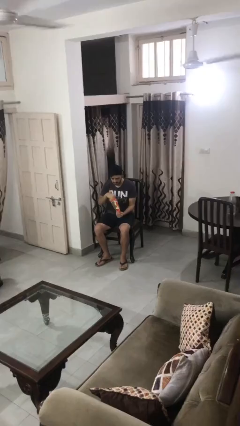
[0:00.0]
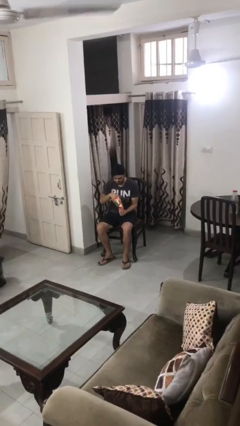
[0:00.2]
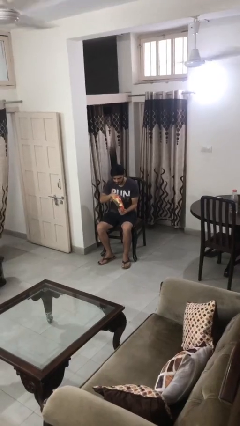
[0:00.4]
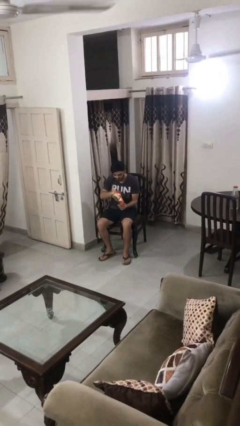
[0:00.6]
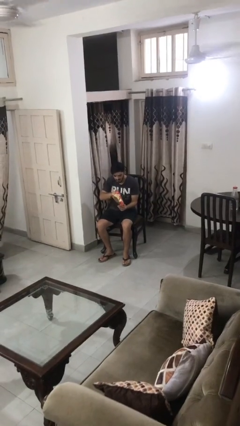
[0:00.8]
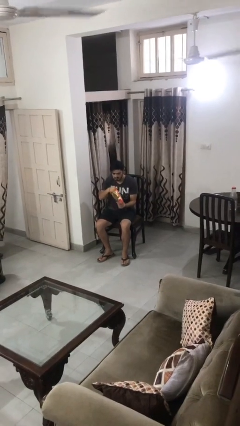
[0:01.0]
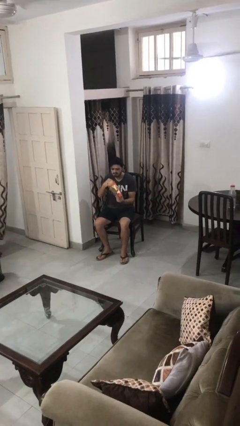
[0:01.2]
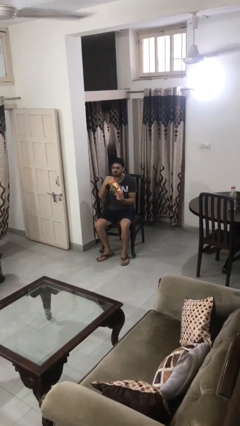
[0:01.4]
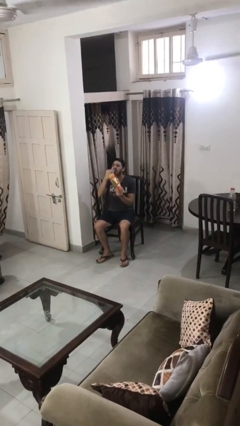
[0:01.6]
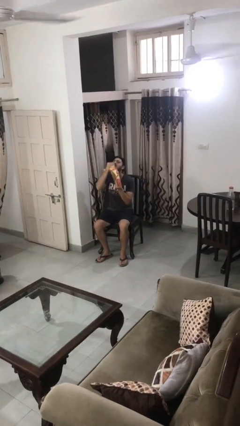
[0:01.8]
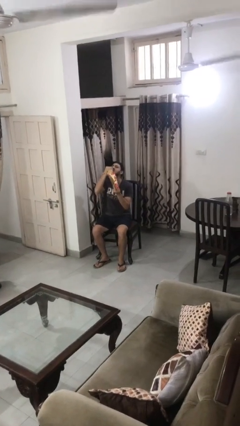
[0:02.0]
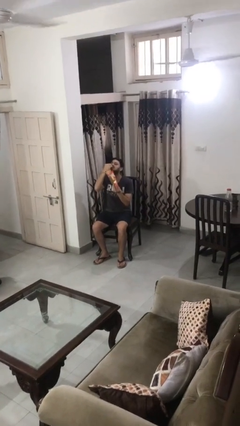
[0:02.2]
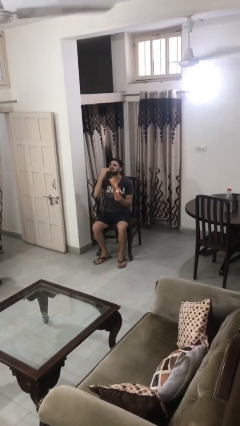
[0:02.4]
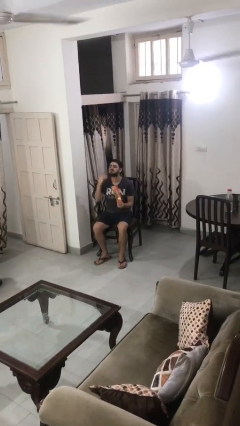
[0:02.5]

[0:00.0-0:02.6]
person eats snack from bag

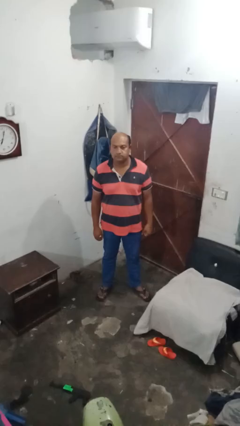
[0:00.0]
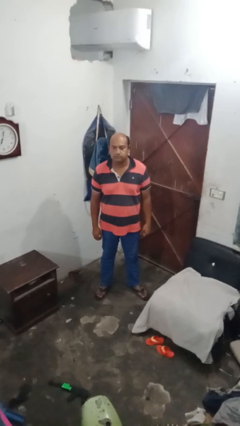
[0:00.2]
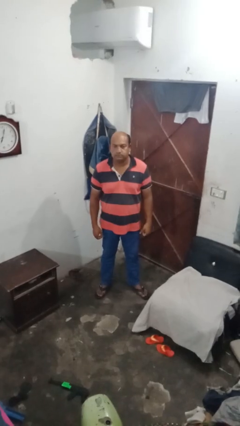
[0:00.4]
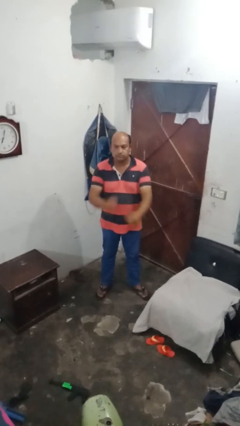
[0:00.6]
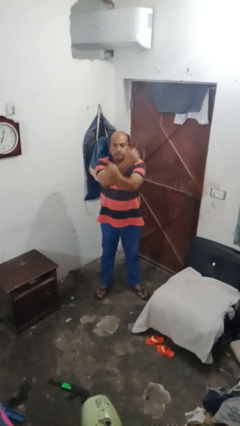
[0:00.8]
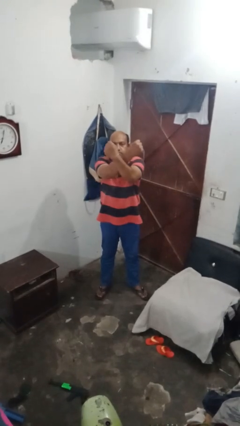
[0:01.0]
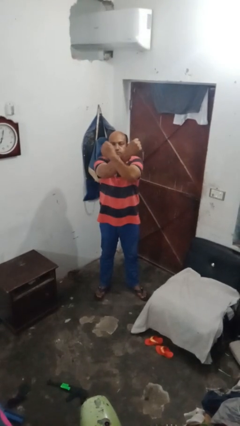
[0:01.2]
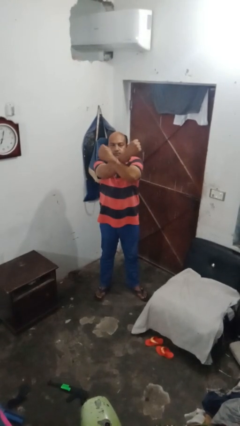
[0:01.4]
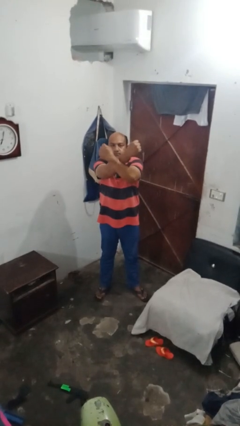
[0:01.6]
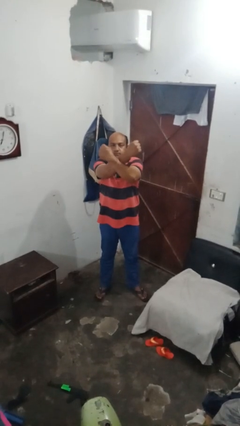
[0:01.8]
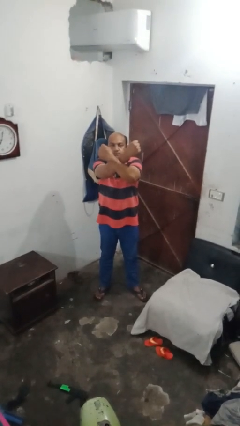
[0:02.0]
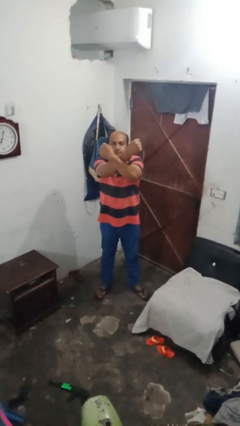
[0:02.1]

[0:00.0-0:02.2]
person gestures arms x

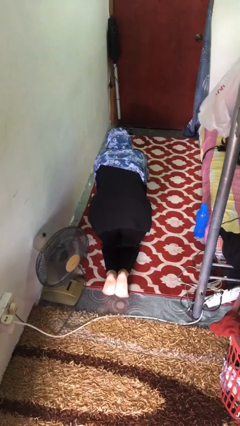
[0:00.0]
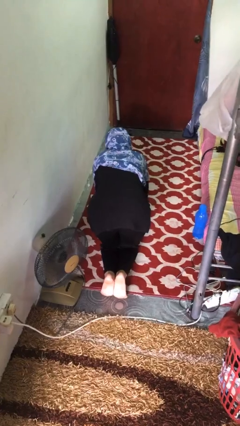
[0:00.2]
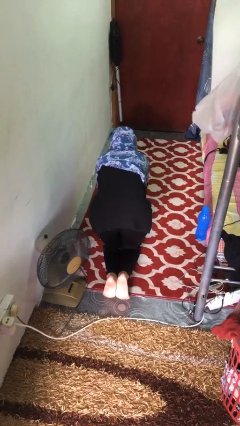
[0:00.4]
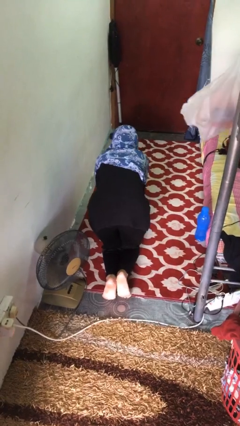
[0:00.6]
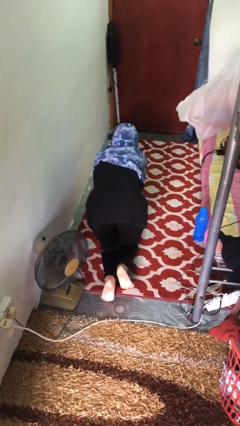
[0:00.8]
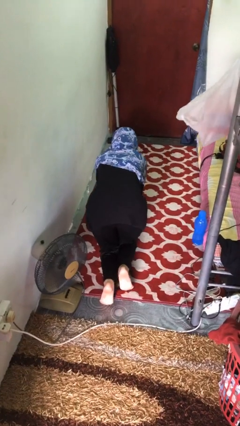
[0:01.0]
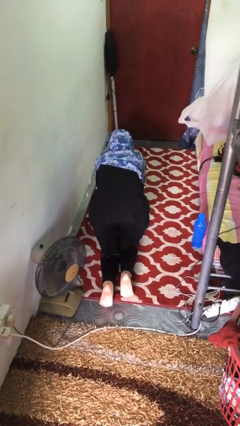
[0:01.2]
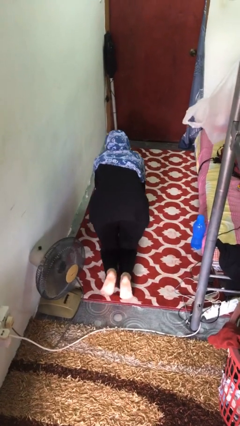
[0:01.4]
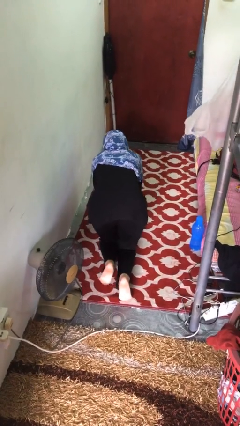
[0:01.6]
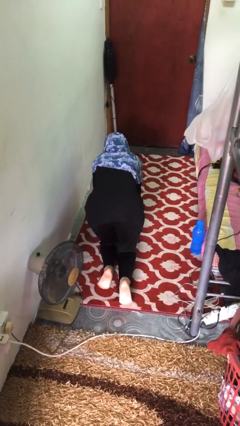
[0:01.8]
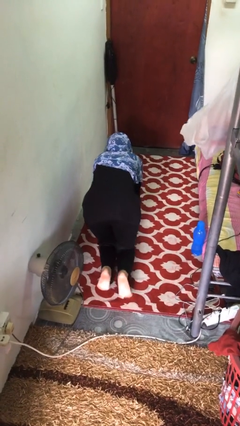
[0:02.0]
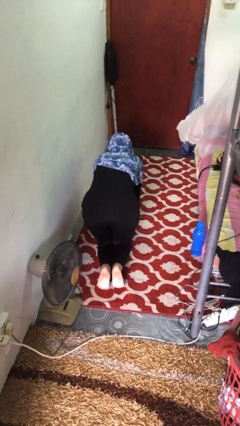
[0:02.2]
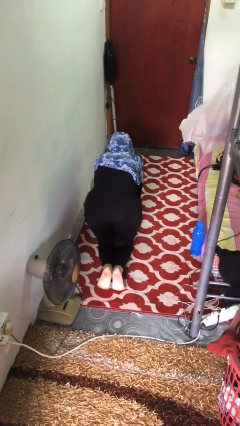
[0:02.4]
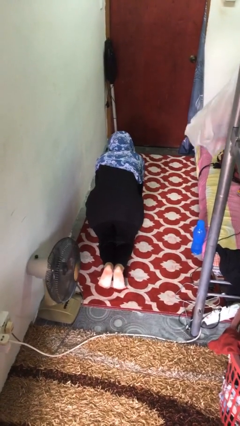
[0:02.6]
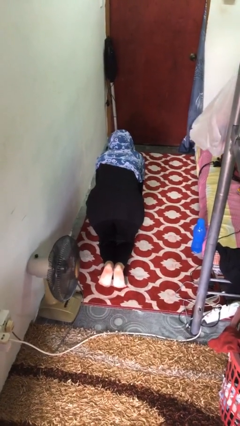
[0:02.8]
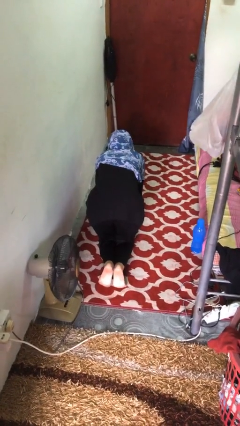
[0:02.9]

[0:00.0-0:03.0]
person crawls

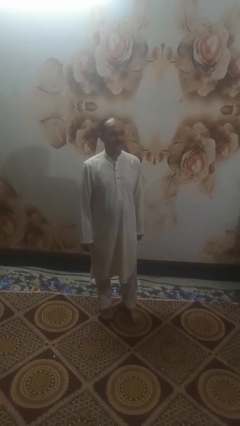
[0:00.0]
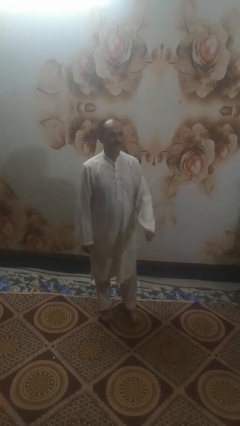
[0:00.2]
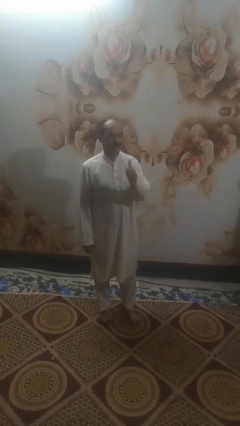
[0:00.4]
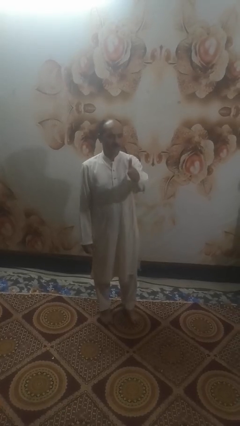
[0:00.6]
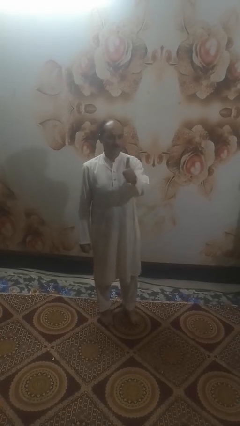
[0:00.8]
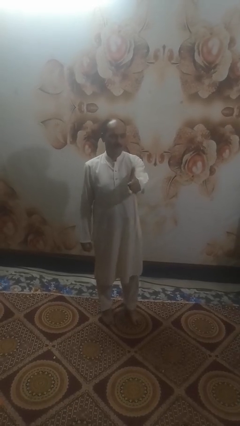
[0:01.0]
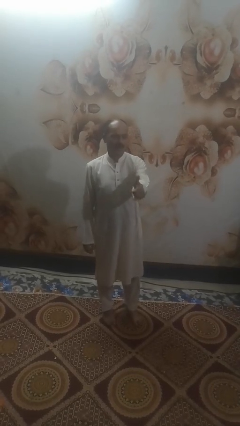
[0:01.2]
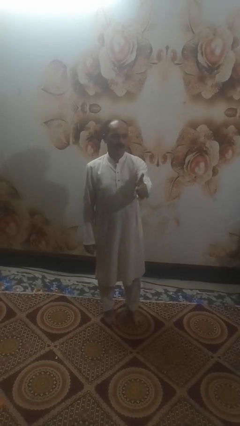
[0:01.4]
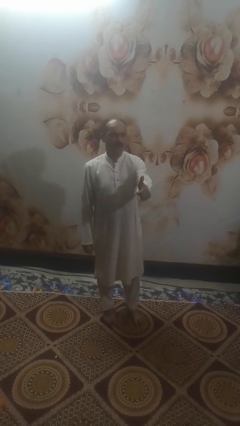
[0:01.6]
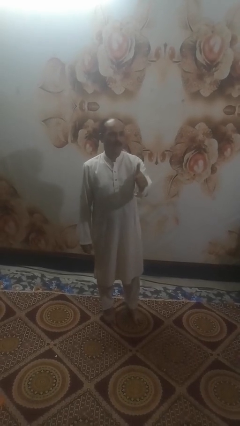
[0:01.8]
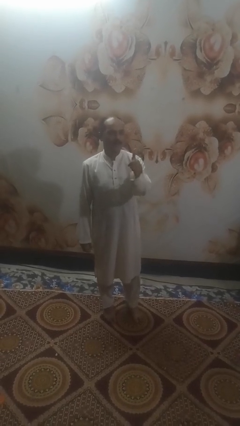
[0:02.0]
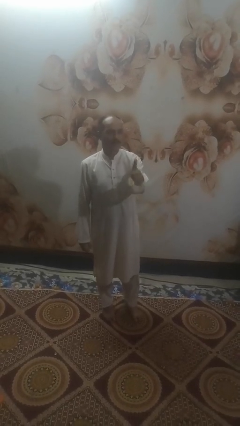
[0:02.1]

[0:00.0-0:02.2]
person gestures thumbs up

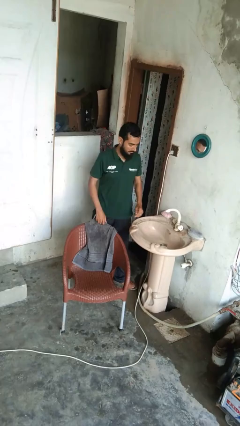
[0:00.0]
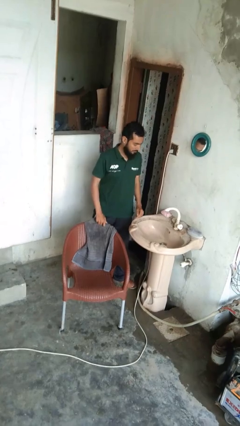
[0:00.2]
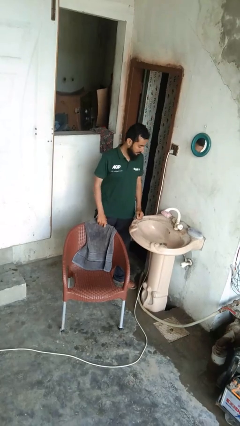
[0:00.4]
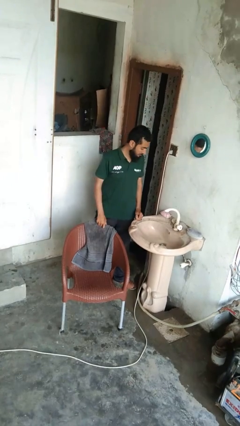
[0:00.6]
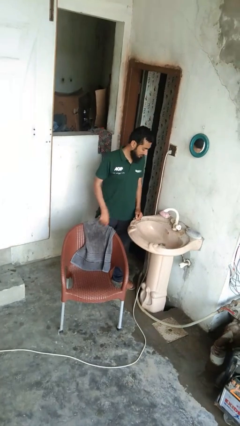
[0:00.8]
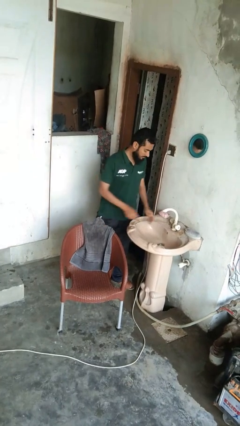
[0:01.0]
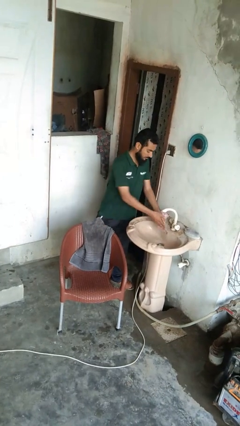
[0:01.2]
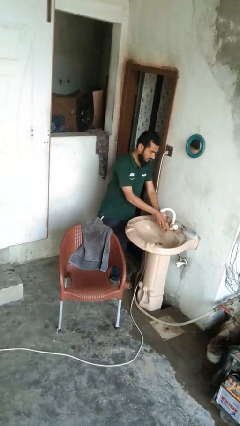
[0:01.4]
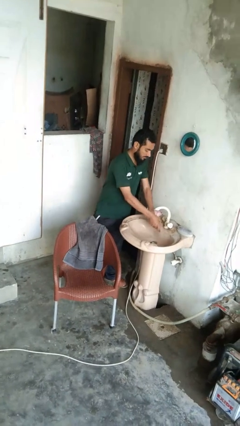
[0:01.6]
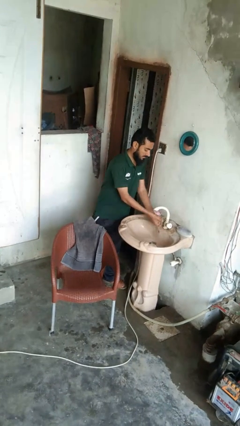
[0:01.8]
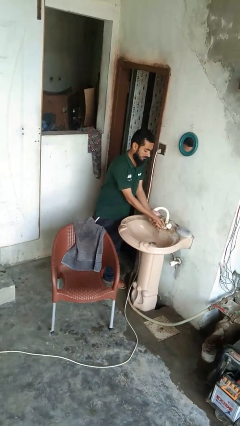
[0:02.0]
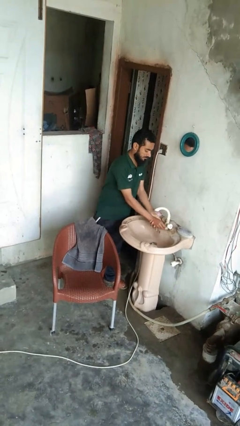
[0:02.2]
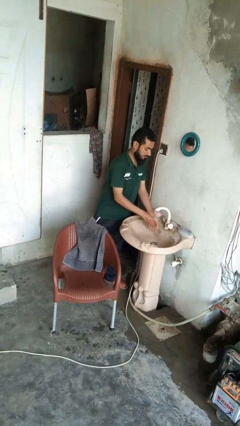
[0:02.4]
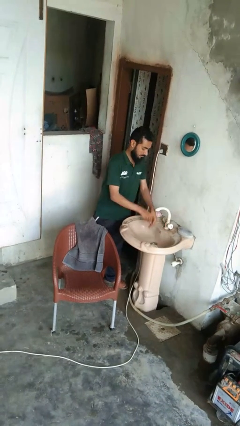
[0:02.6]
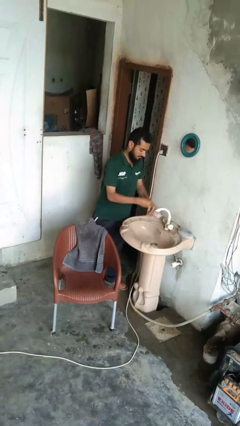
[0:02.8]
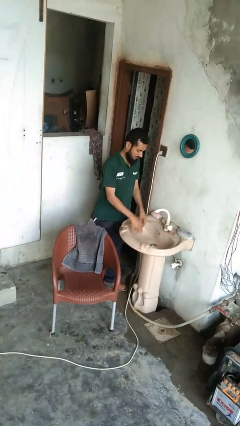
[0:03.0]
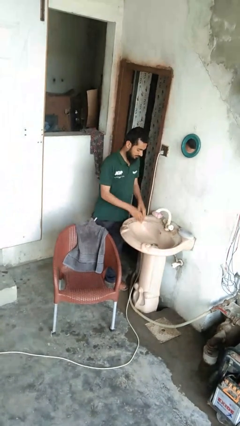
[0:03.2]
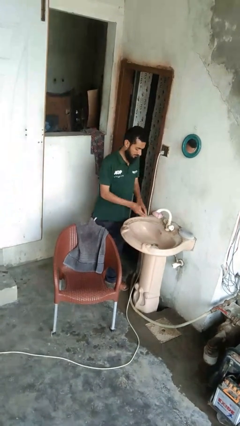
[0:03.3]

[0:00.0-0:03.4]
person washes hands

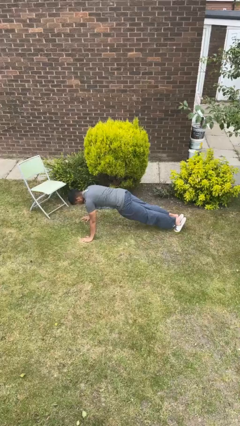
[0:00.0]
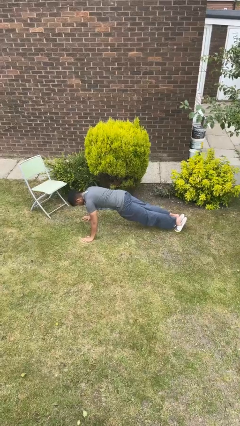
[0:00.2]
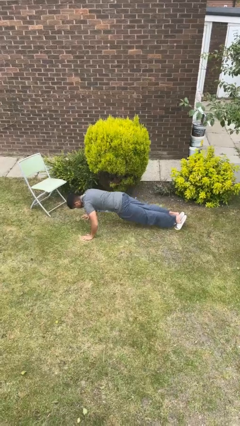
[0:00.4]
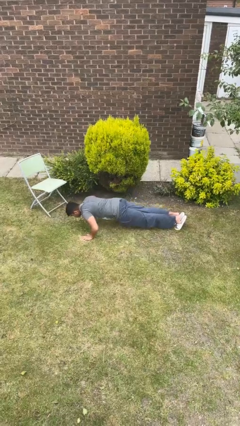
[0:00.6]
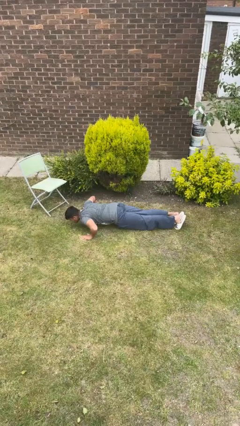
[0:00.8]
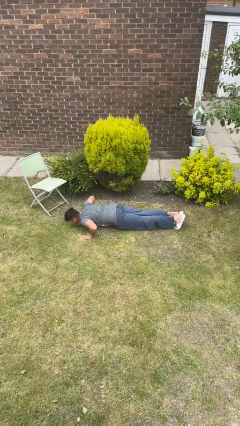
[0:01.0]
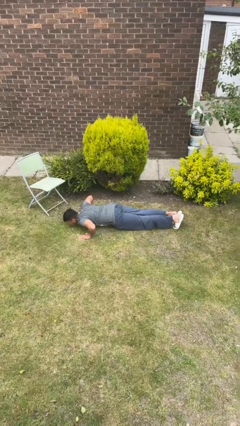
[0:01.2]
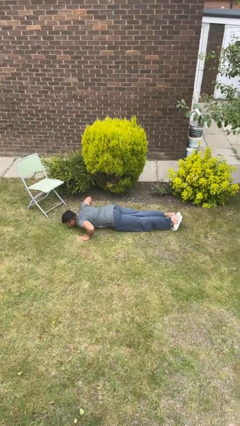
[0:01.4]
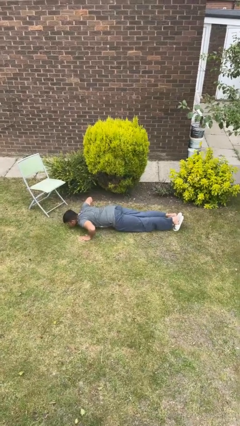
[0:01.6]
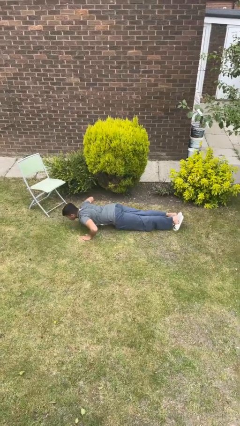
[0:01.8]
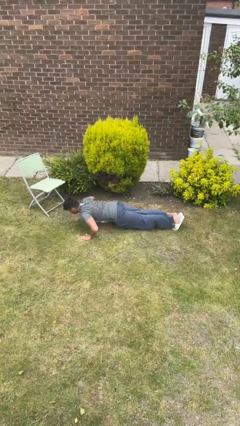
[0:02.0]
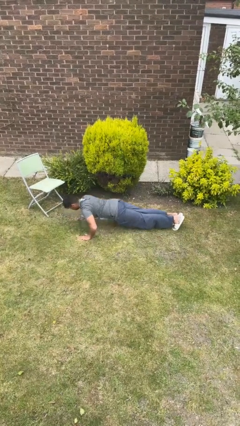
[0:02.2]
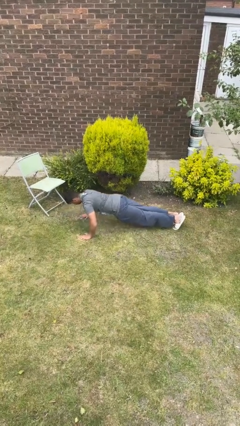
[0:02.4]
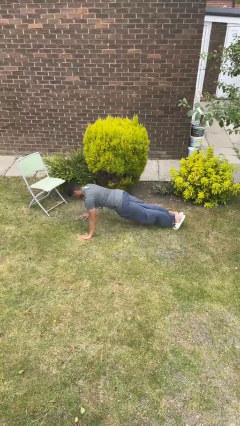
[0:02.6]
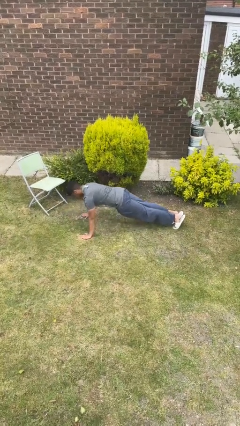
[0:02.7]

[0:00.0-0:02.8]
person exercises with pushup

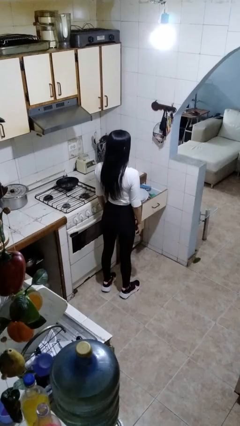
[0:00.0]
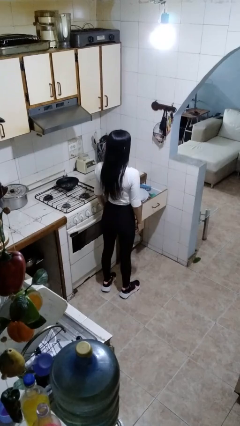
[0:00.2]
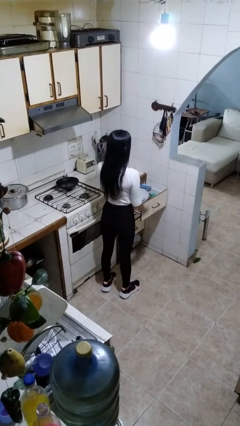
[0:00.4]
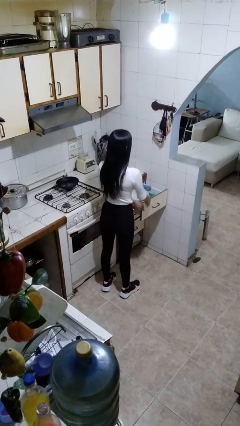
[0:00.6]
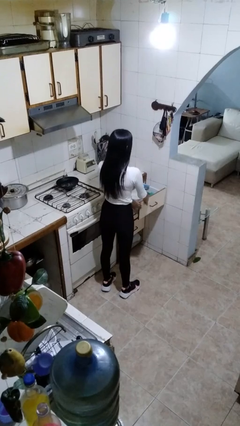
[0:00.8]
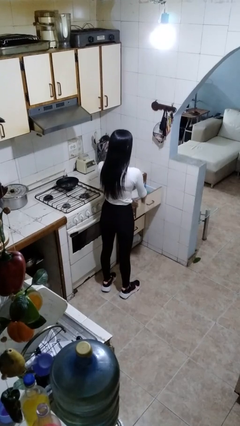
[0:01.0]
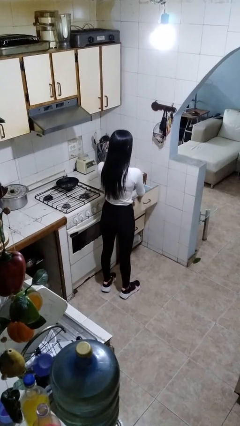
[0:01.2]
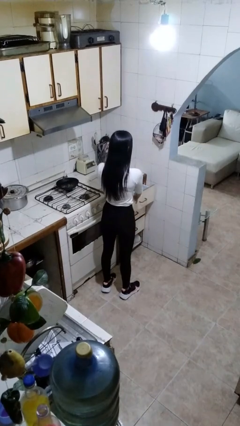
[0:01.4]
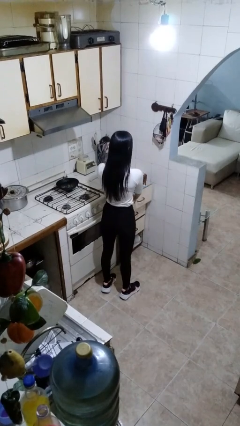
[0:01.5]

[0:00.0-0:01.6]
person closes kitchen drawer
